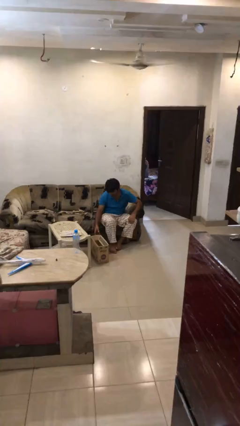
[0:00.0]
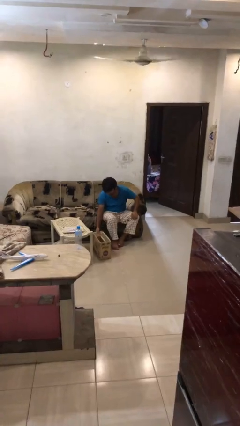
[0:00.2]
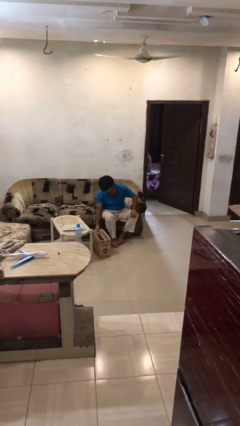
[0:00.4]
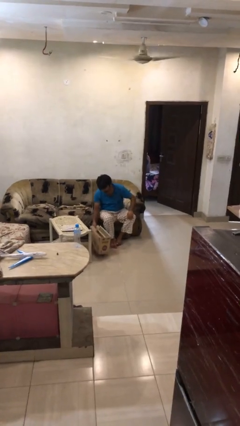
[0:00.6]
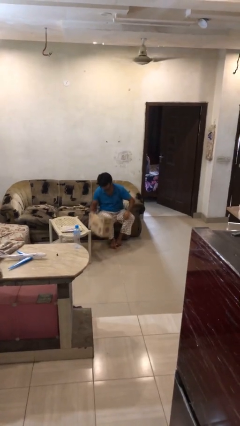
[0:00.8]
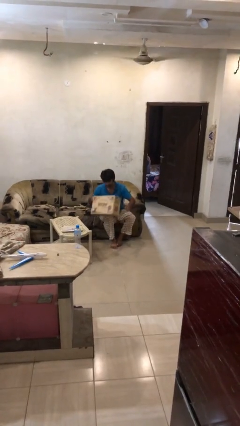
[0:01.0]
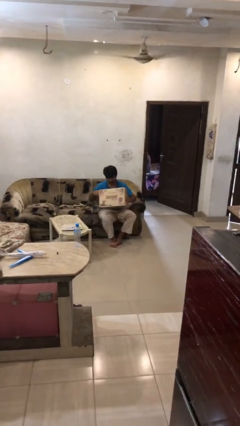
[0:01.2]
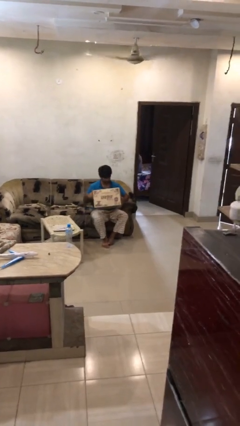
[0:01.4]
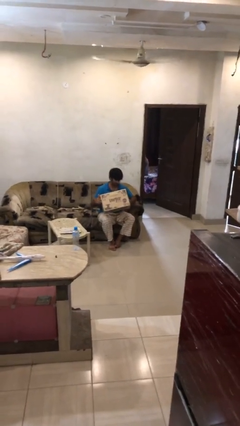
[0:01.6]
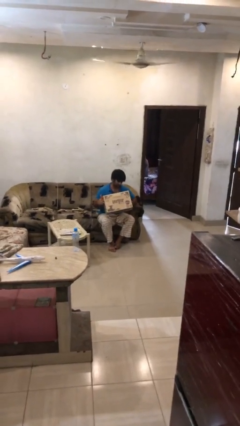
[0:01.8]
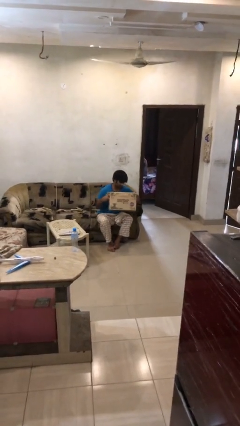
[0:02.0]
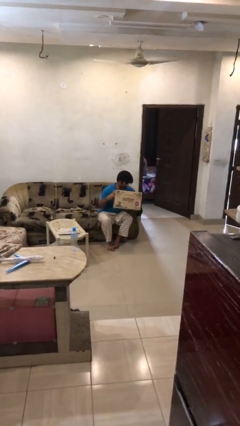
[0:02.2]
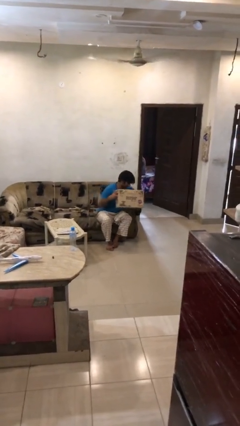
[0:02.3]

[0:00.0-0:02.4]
person picks up object from floor

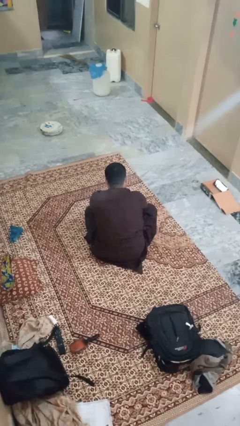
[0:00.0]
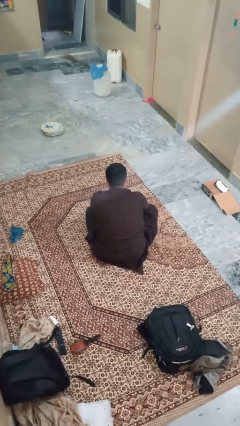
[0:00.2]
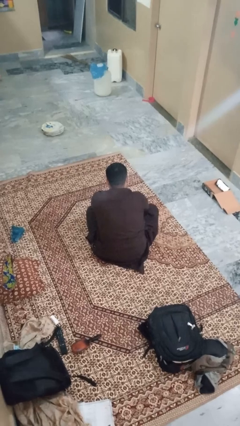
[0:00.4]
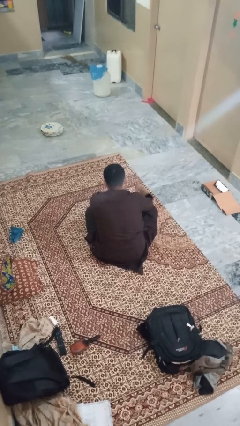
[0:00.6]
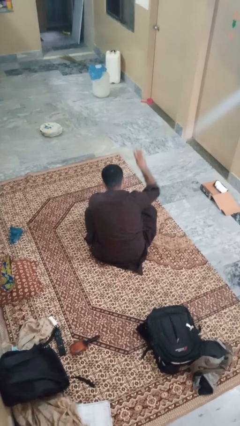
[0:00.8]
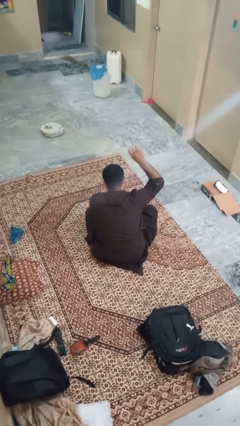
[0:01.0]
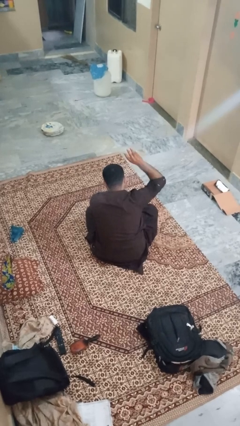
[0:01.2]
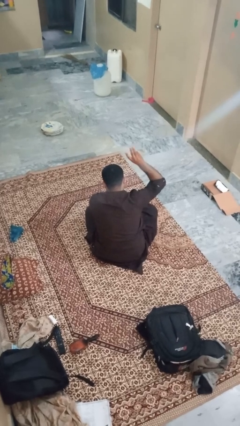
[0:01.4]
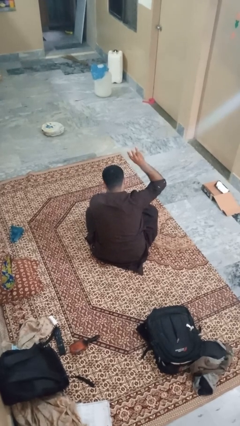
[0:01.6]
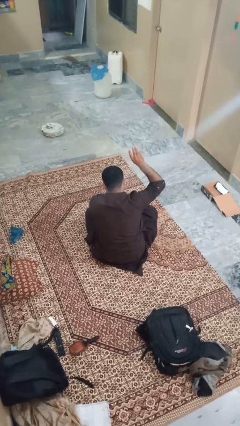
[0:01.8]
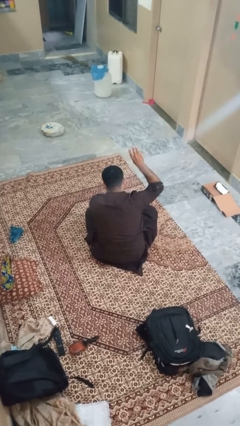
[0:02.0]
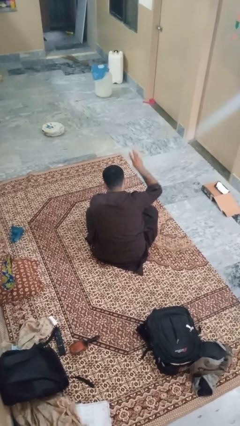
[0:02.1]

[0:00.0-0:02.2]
person gestures number three

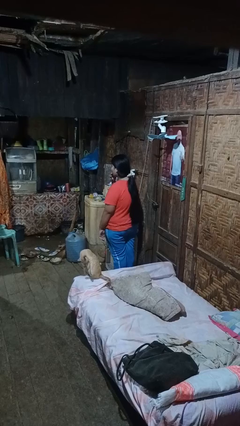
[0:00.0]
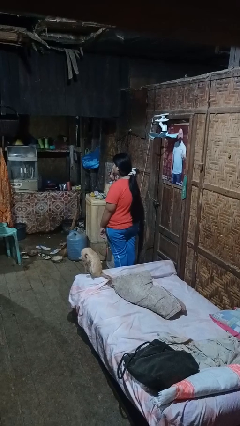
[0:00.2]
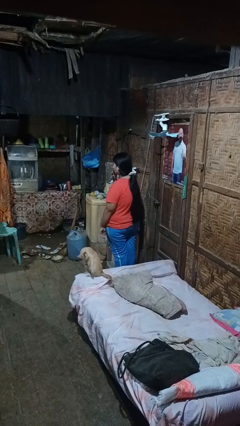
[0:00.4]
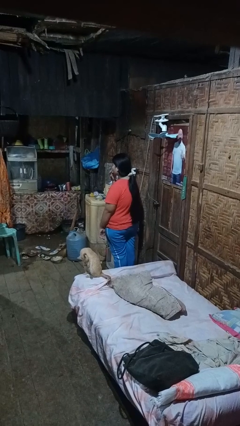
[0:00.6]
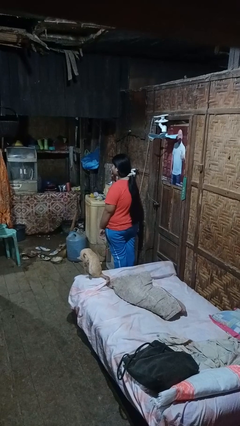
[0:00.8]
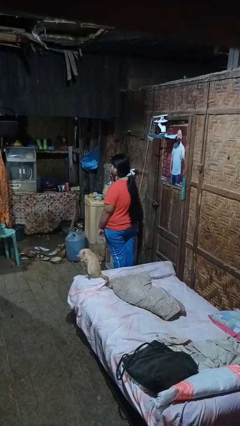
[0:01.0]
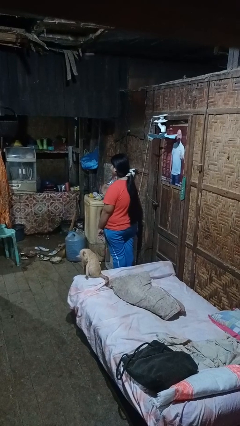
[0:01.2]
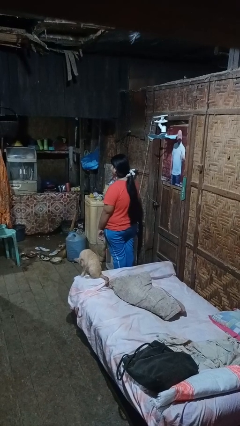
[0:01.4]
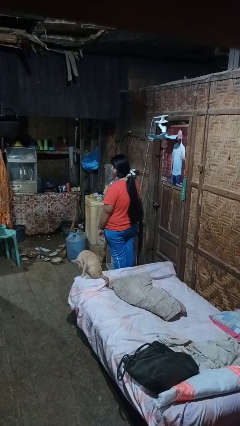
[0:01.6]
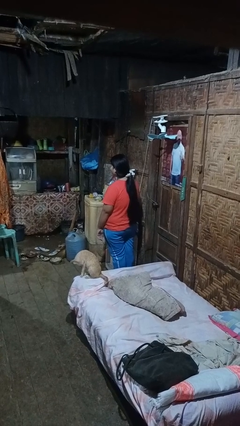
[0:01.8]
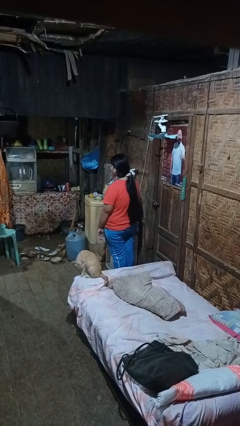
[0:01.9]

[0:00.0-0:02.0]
person licks fingers

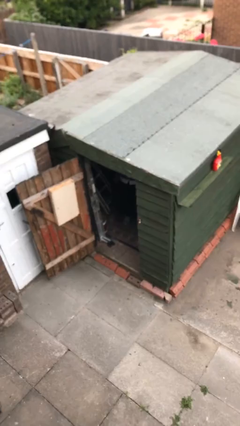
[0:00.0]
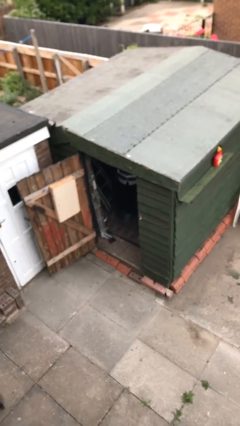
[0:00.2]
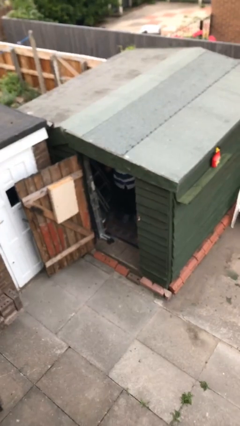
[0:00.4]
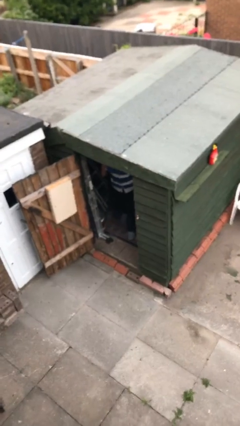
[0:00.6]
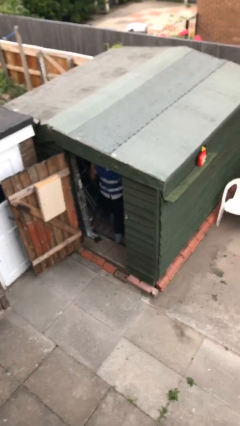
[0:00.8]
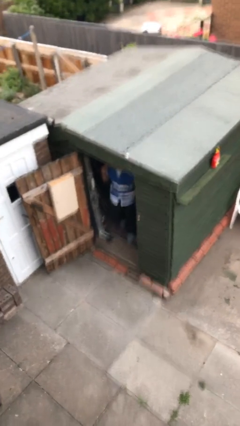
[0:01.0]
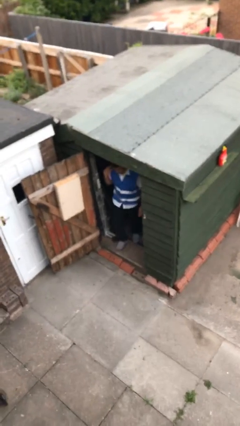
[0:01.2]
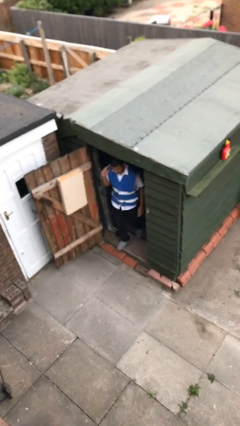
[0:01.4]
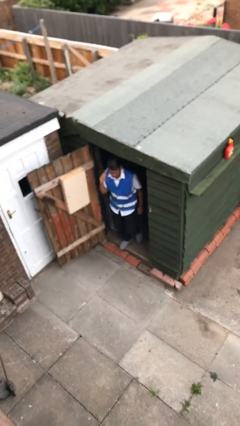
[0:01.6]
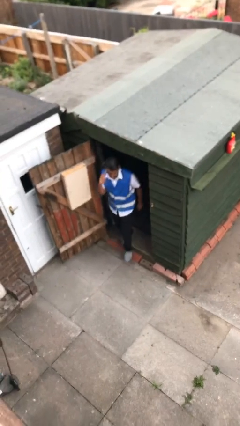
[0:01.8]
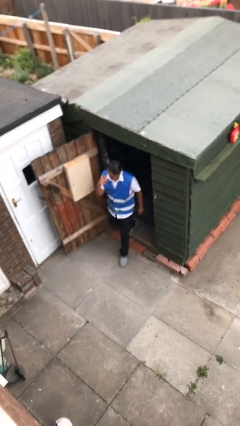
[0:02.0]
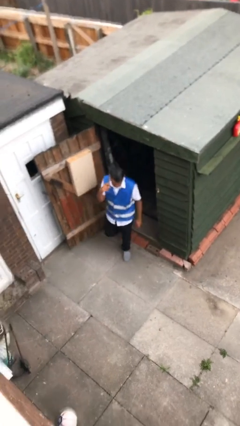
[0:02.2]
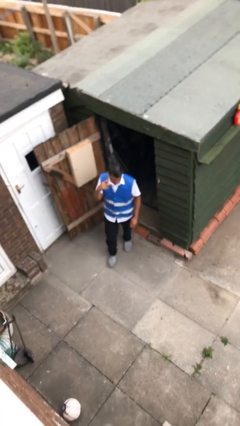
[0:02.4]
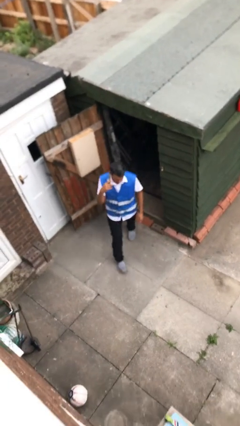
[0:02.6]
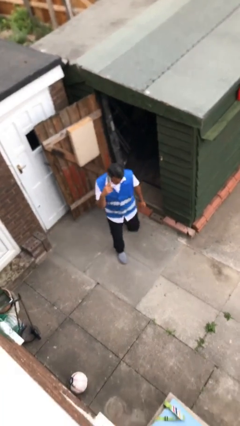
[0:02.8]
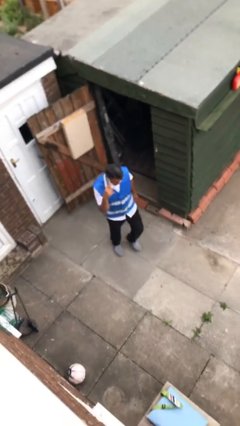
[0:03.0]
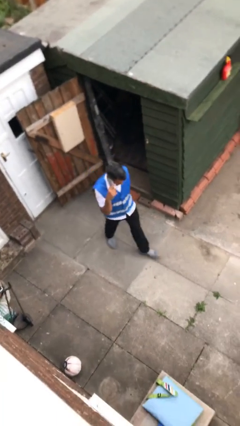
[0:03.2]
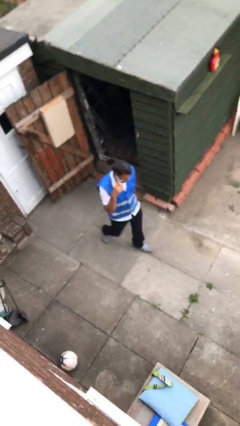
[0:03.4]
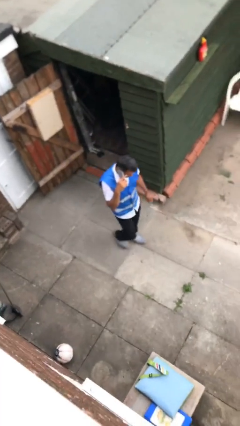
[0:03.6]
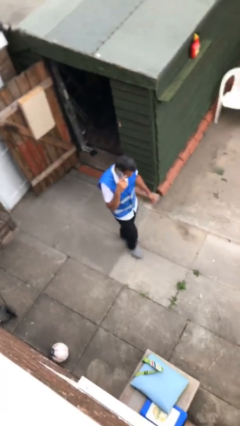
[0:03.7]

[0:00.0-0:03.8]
person enters scene through structure

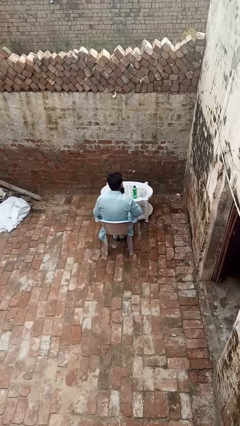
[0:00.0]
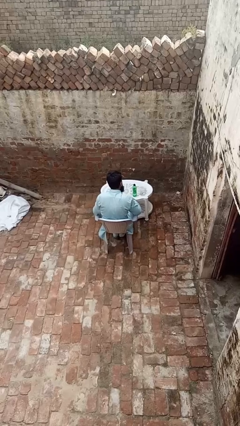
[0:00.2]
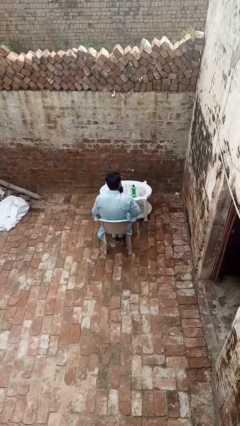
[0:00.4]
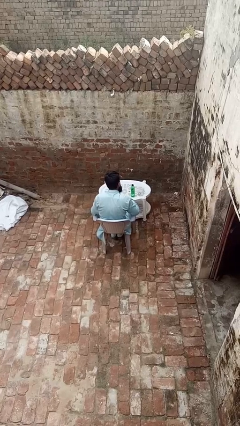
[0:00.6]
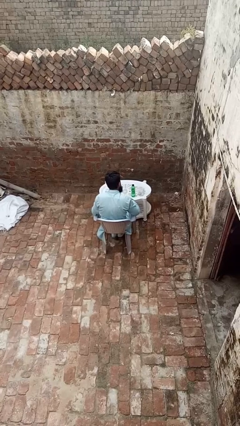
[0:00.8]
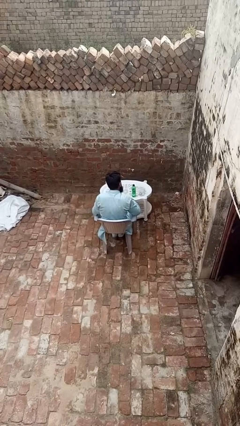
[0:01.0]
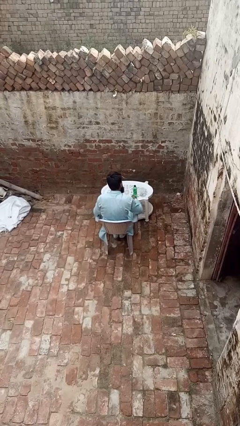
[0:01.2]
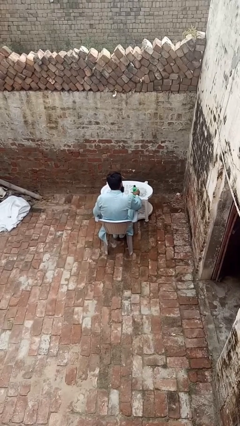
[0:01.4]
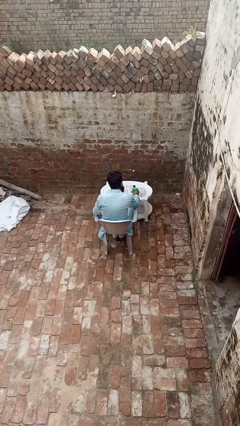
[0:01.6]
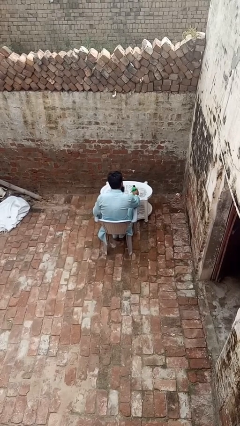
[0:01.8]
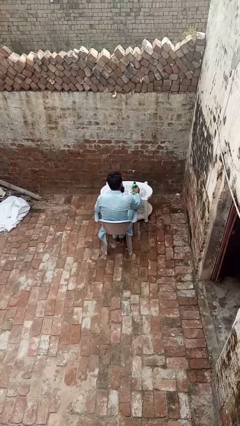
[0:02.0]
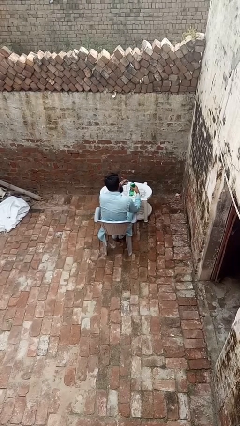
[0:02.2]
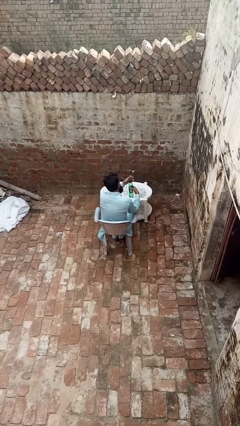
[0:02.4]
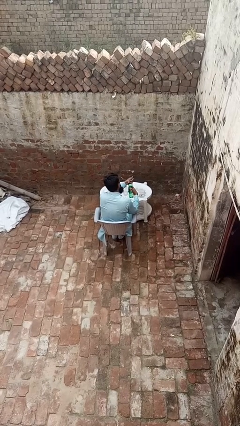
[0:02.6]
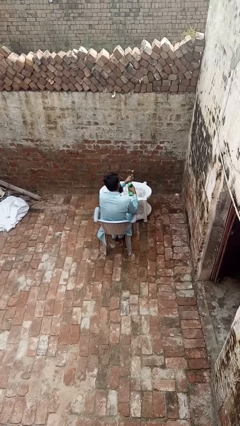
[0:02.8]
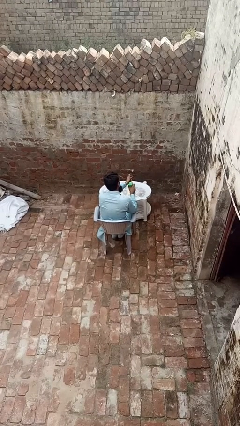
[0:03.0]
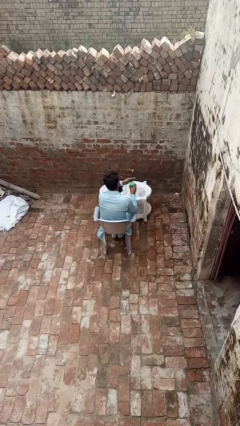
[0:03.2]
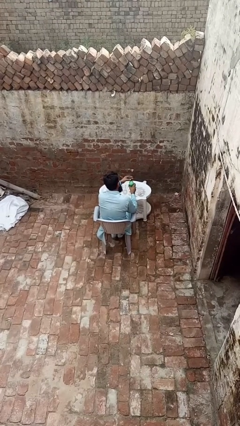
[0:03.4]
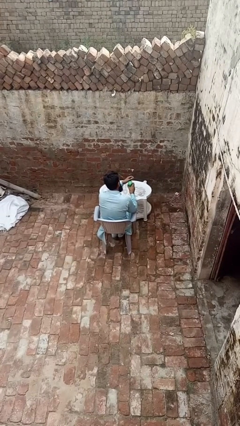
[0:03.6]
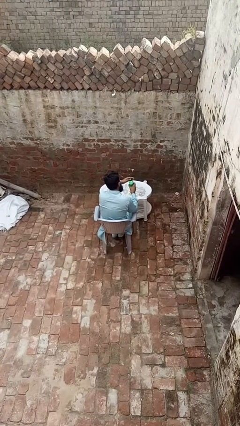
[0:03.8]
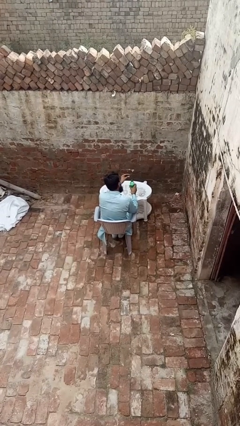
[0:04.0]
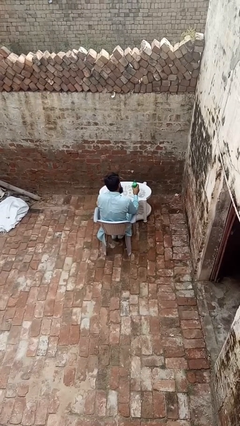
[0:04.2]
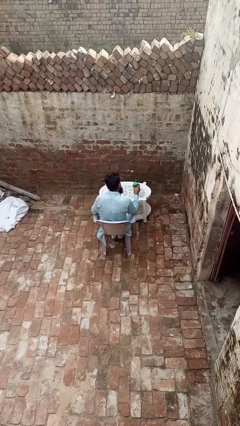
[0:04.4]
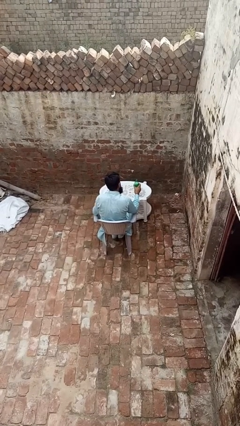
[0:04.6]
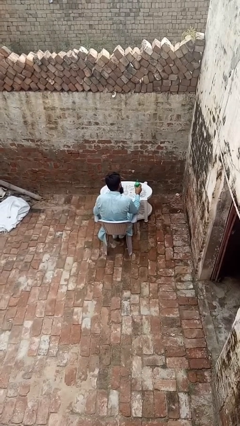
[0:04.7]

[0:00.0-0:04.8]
person unscrews lid from bottle

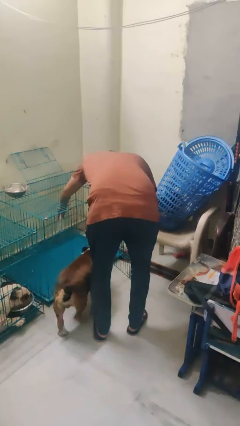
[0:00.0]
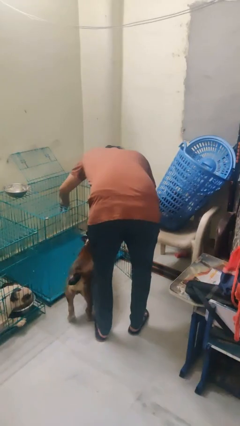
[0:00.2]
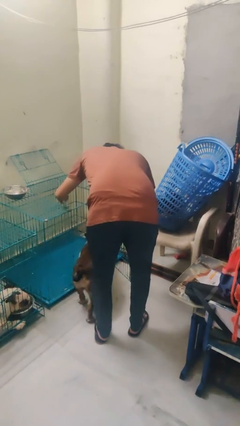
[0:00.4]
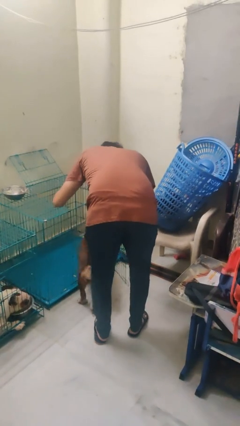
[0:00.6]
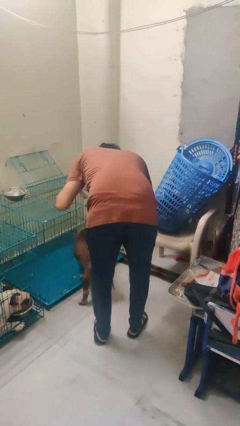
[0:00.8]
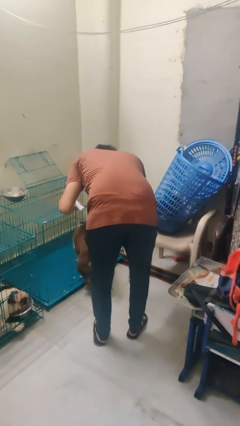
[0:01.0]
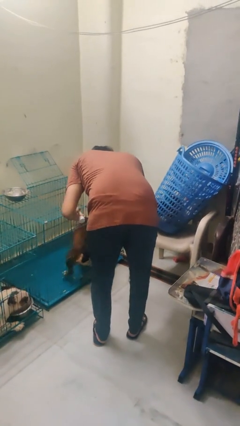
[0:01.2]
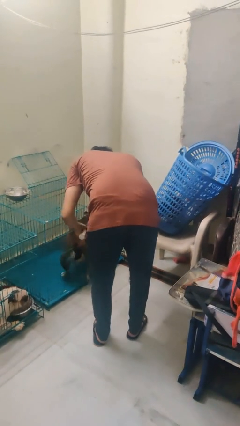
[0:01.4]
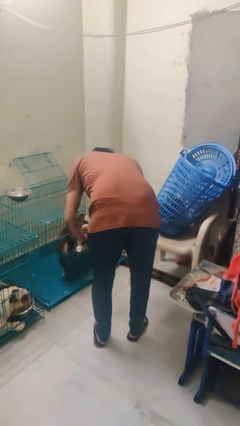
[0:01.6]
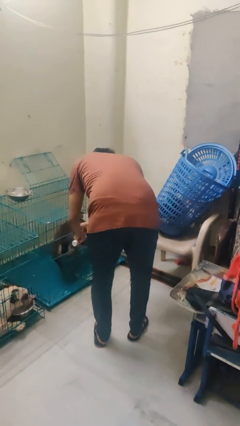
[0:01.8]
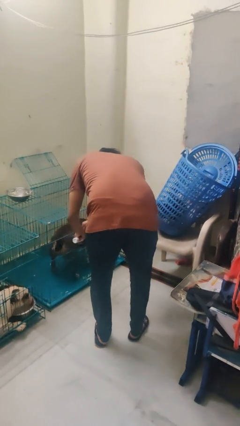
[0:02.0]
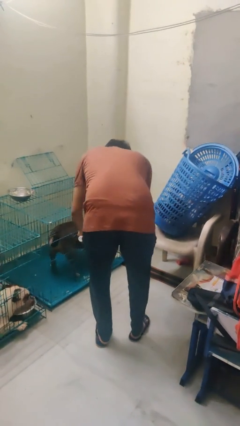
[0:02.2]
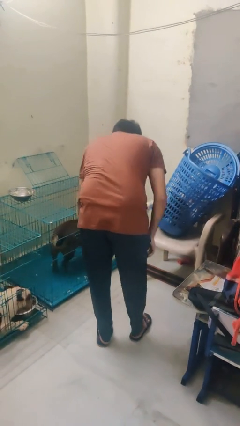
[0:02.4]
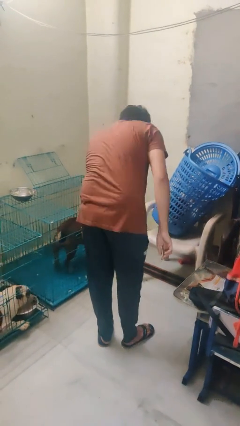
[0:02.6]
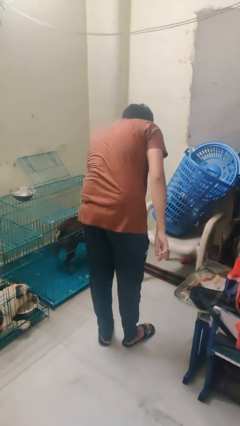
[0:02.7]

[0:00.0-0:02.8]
person crates dog
